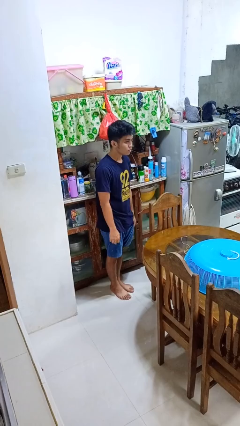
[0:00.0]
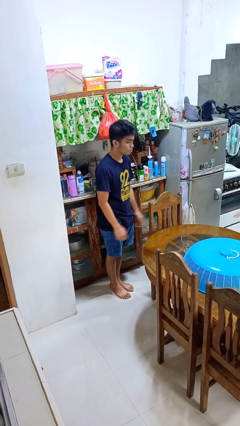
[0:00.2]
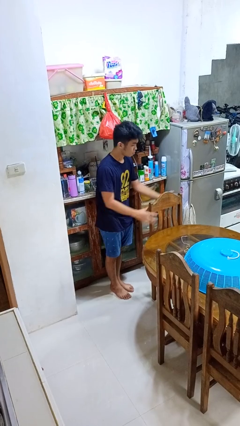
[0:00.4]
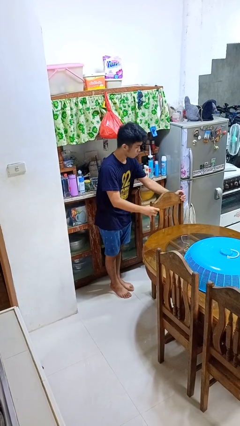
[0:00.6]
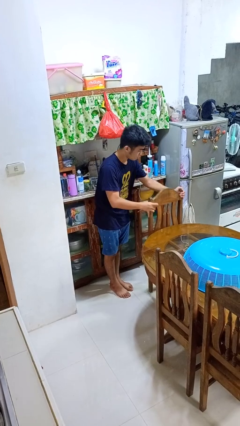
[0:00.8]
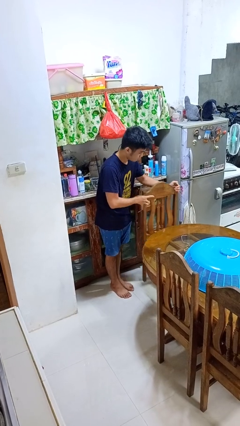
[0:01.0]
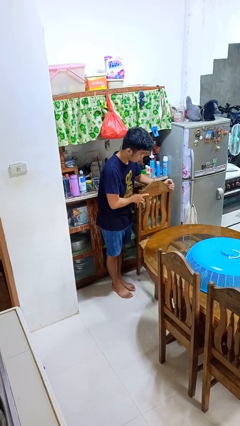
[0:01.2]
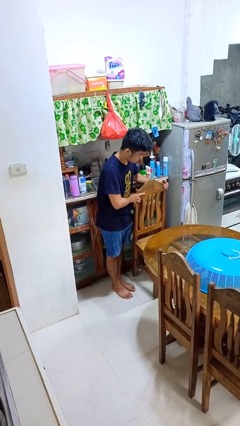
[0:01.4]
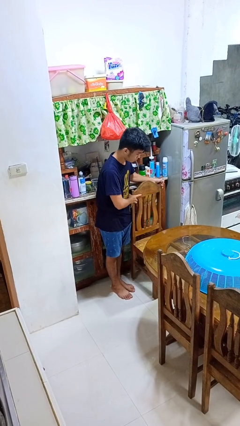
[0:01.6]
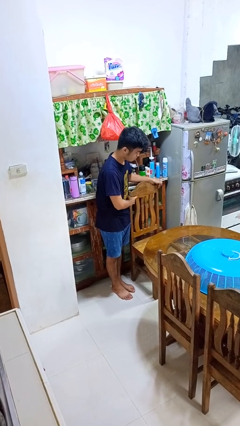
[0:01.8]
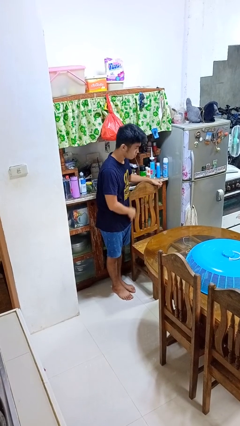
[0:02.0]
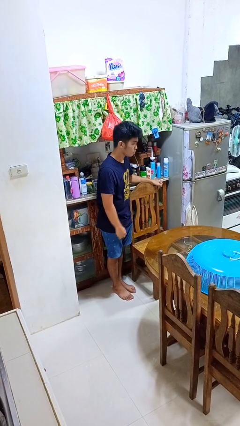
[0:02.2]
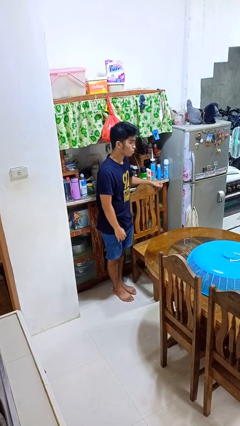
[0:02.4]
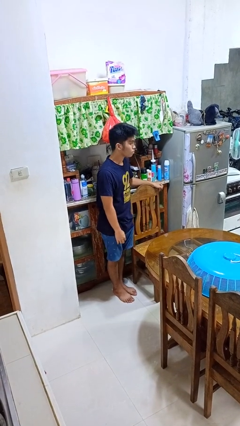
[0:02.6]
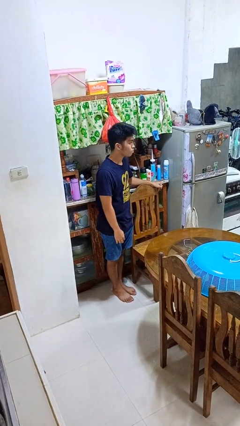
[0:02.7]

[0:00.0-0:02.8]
person pulls out chair

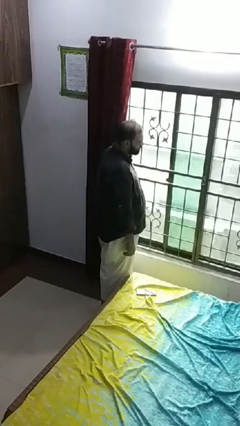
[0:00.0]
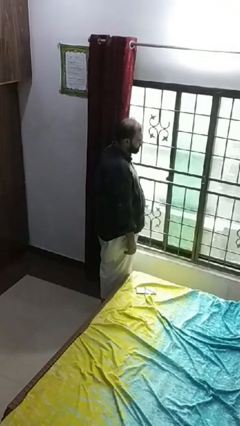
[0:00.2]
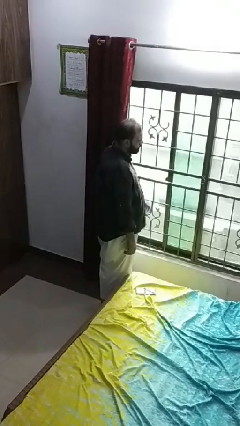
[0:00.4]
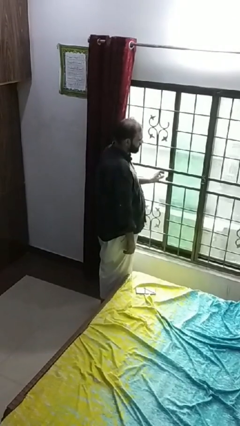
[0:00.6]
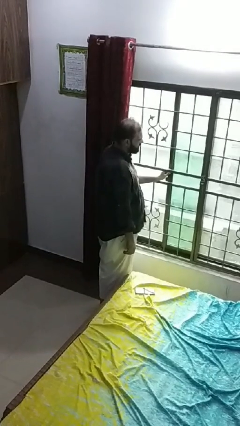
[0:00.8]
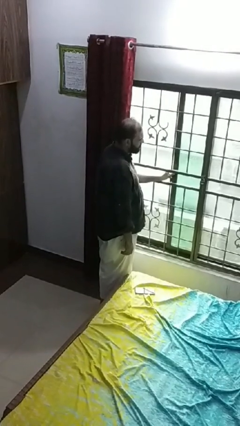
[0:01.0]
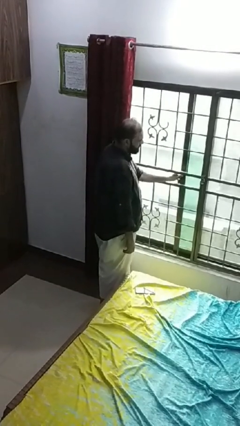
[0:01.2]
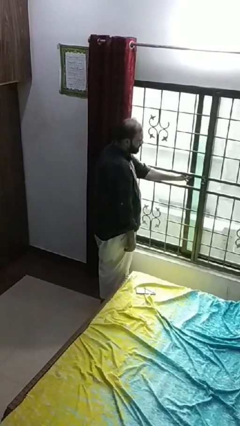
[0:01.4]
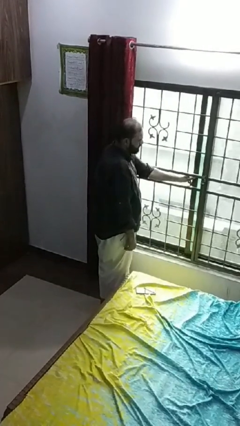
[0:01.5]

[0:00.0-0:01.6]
person closes home window

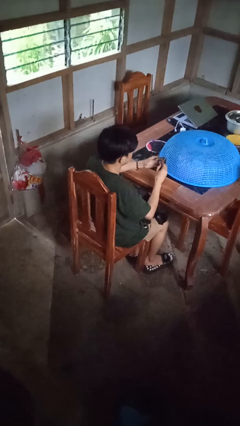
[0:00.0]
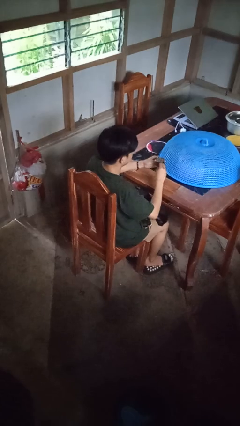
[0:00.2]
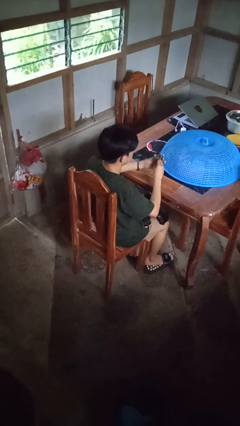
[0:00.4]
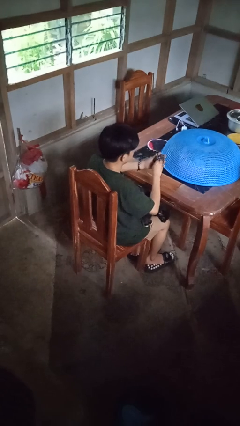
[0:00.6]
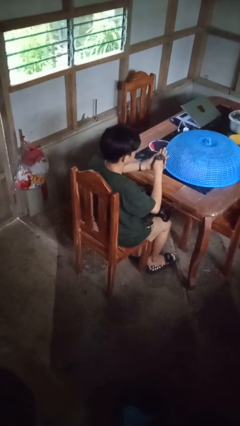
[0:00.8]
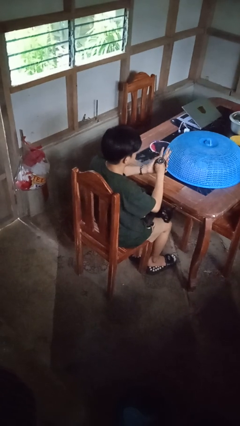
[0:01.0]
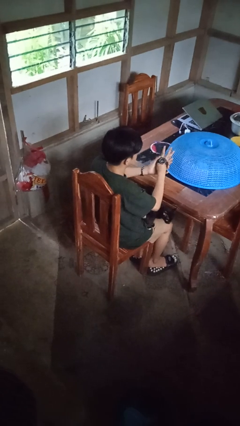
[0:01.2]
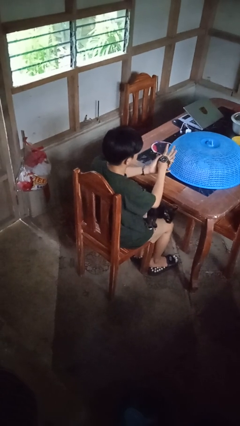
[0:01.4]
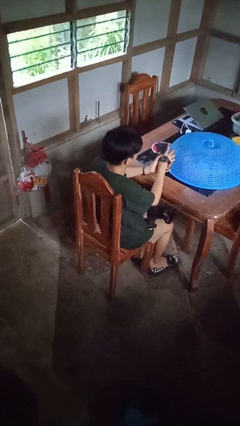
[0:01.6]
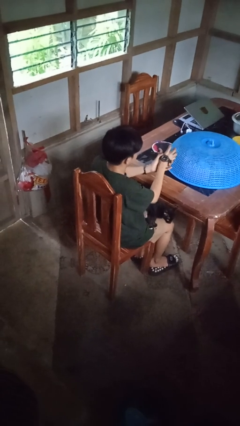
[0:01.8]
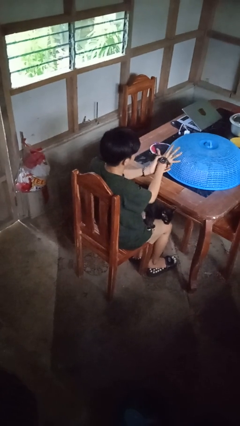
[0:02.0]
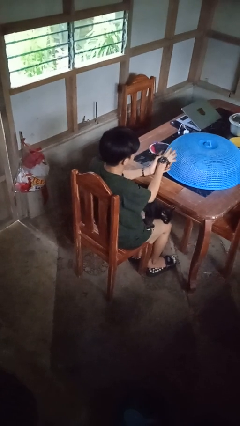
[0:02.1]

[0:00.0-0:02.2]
person puts on wristwatch

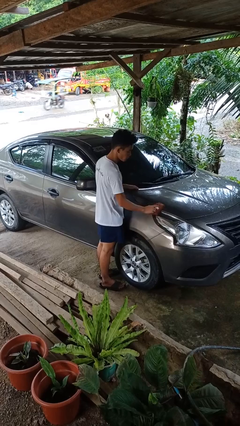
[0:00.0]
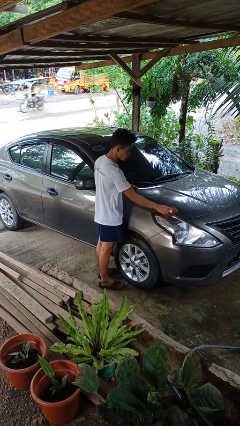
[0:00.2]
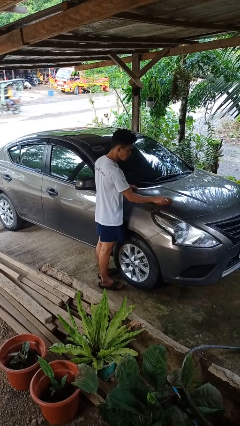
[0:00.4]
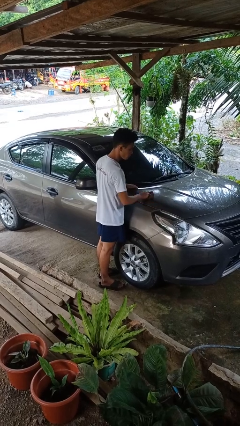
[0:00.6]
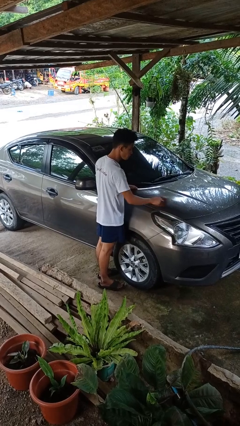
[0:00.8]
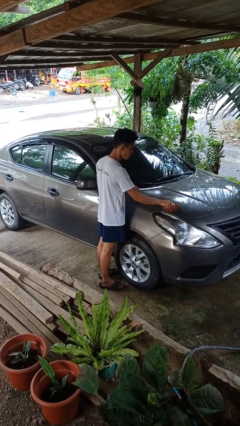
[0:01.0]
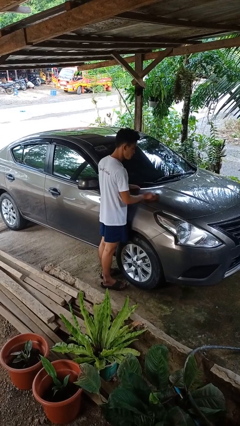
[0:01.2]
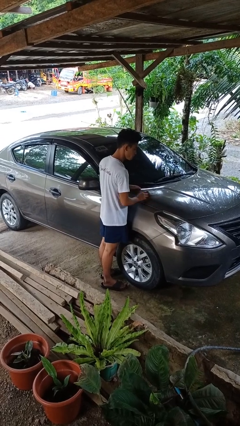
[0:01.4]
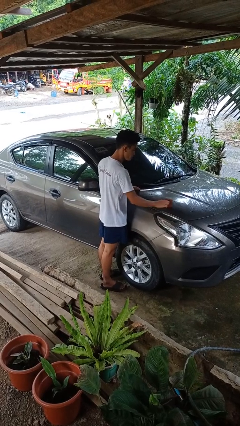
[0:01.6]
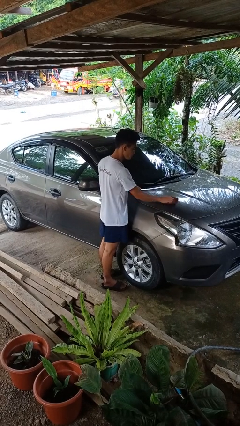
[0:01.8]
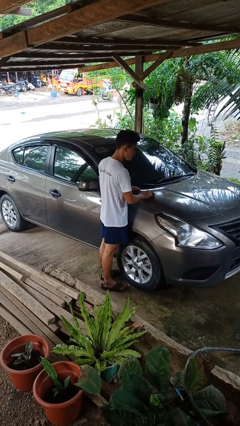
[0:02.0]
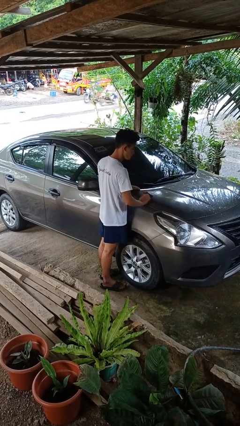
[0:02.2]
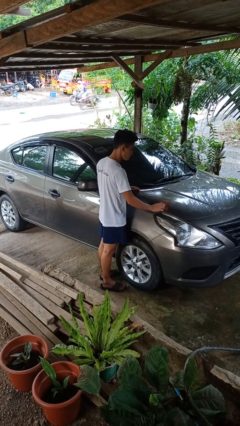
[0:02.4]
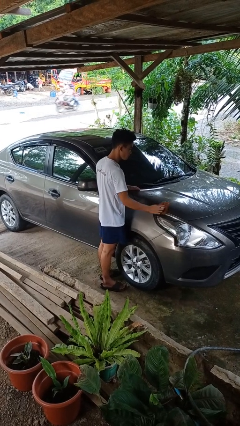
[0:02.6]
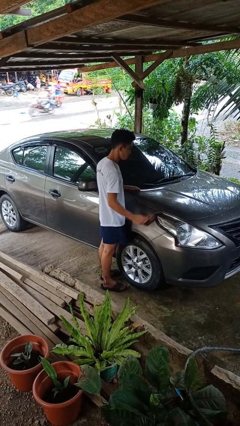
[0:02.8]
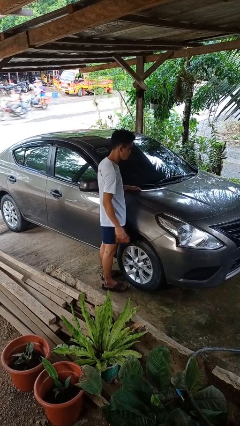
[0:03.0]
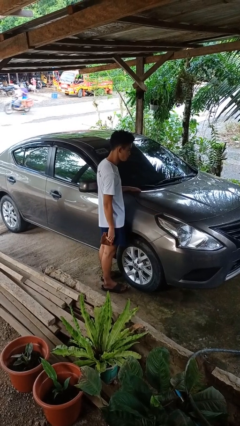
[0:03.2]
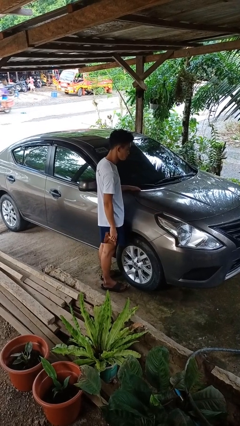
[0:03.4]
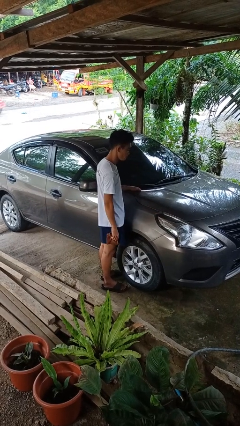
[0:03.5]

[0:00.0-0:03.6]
person polishes car with rag

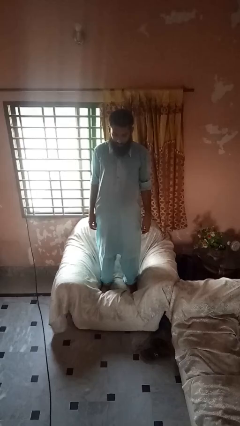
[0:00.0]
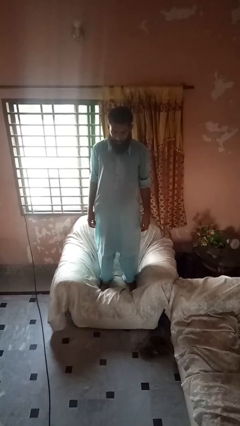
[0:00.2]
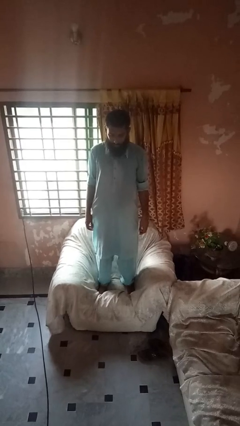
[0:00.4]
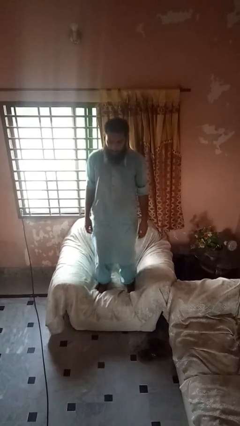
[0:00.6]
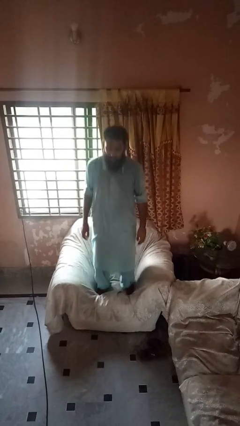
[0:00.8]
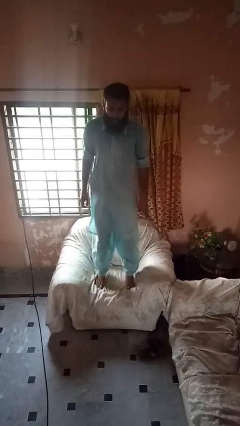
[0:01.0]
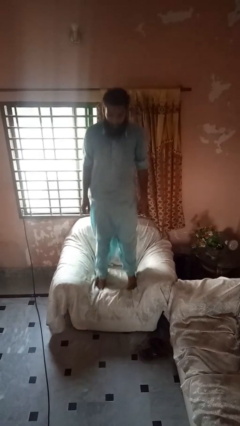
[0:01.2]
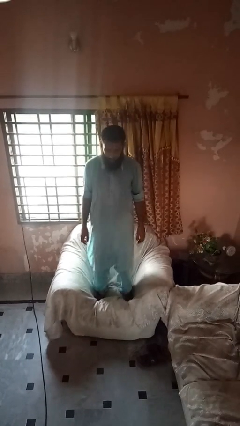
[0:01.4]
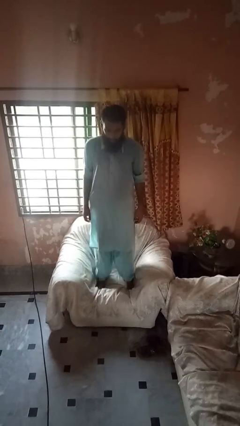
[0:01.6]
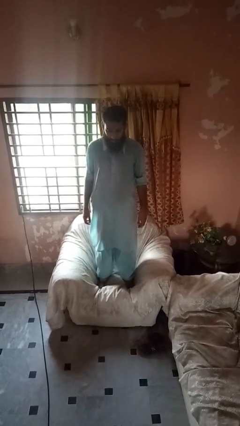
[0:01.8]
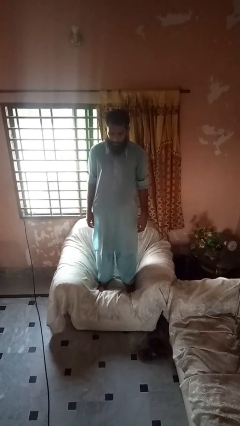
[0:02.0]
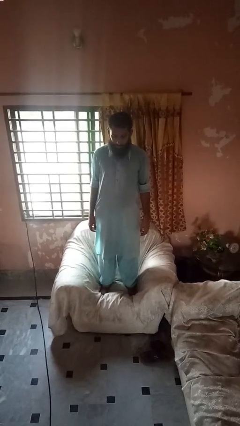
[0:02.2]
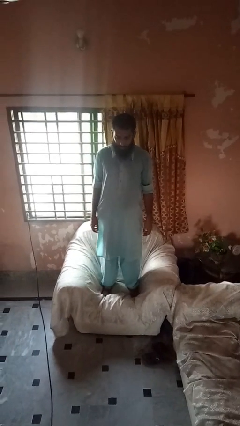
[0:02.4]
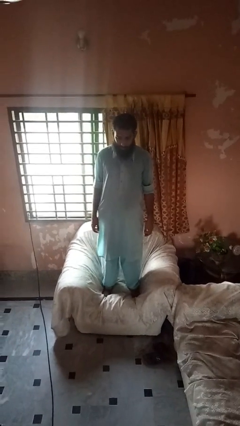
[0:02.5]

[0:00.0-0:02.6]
person jumps on couch

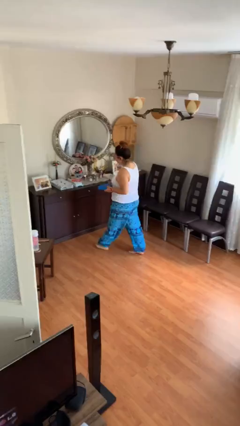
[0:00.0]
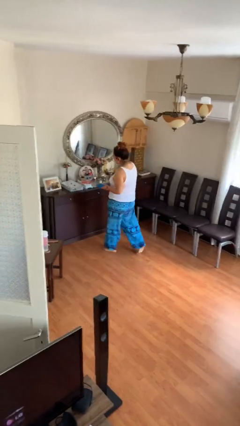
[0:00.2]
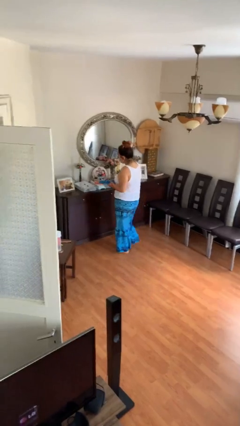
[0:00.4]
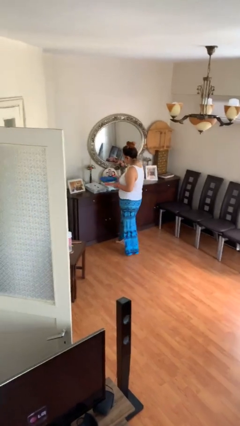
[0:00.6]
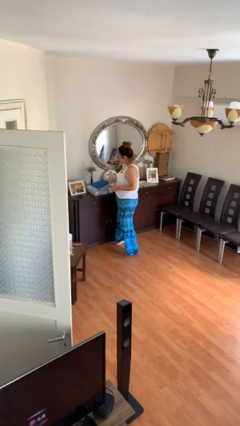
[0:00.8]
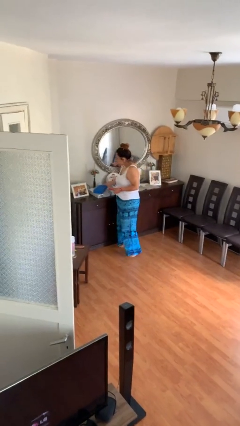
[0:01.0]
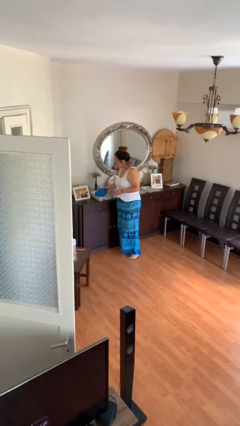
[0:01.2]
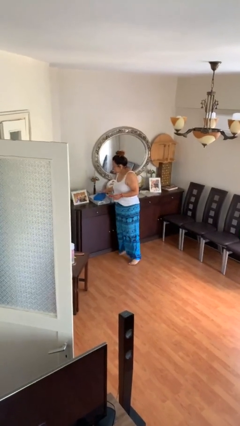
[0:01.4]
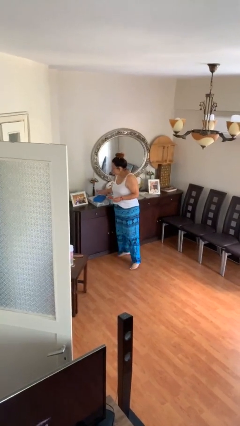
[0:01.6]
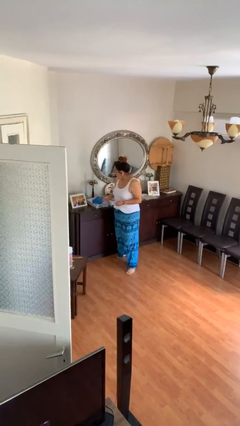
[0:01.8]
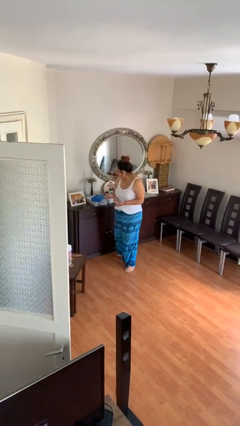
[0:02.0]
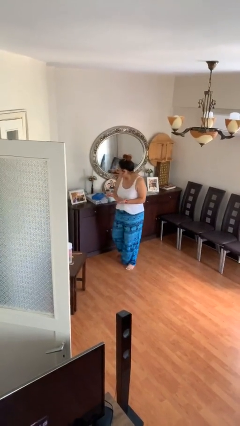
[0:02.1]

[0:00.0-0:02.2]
person puts down object on table

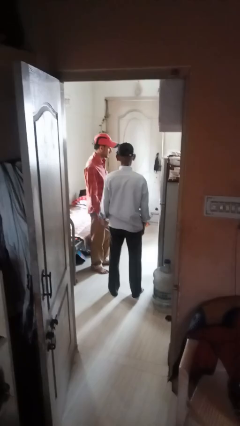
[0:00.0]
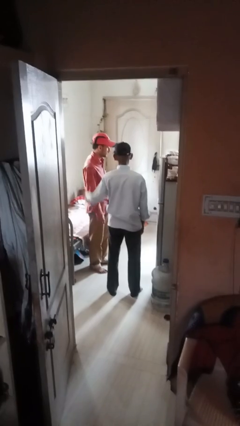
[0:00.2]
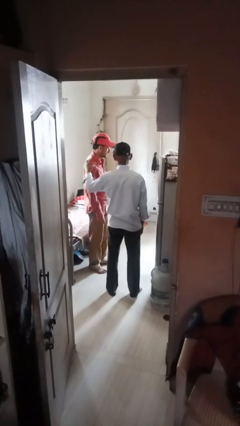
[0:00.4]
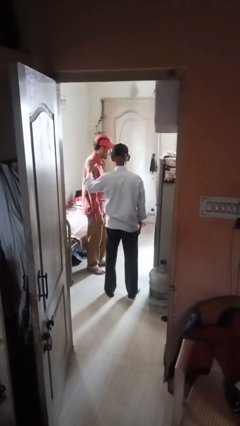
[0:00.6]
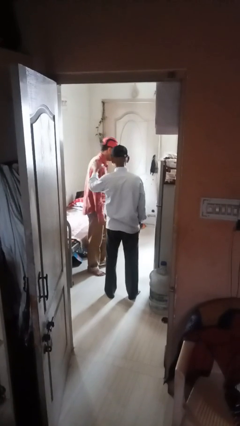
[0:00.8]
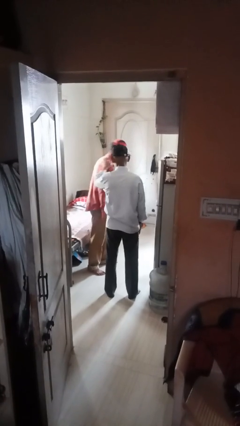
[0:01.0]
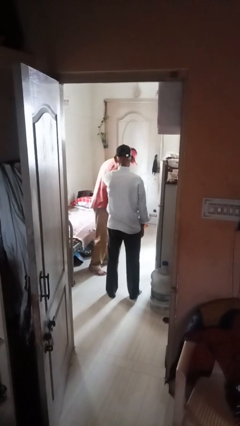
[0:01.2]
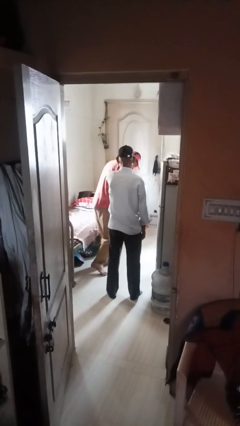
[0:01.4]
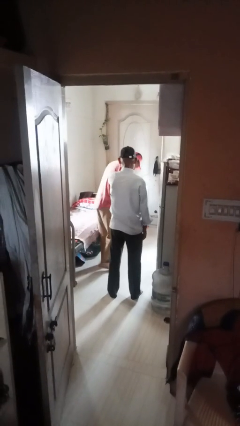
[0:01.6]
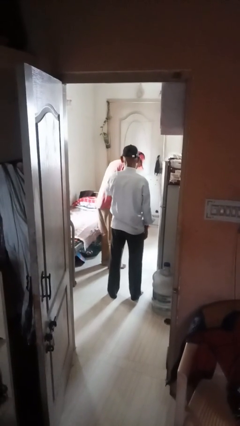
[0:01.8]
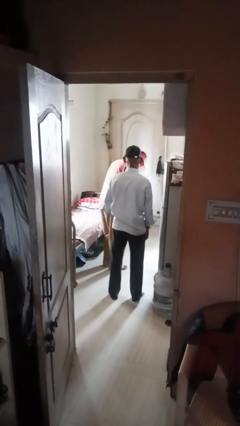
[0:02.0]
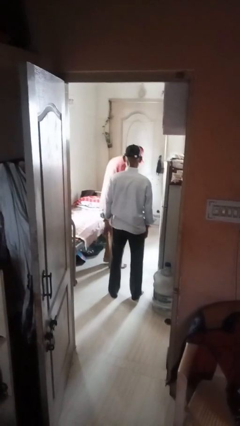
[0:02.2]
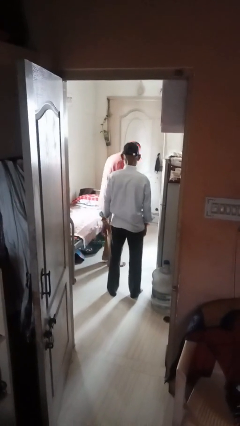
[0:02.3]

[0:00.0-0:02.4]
person shoves person
